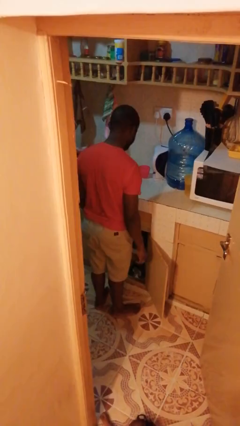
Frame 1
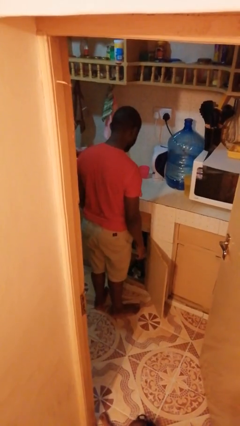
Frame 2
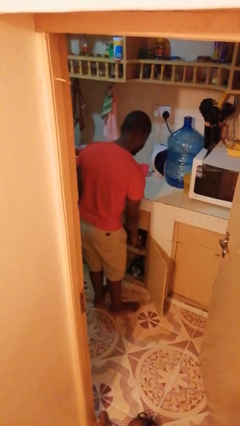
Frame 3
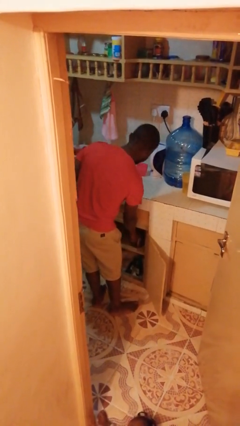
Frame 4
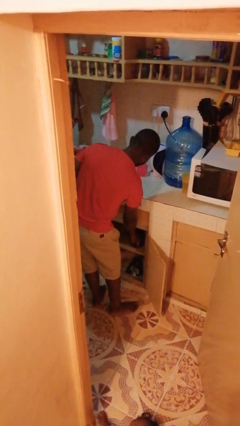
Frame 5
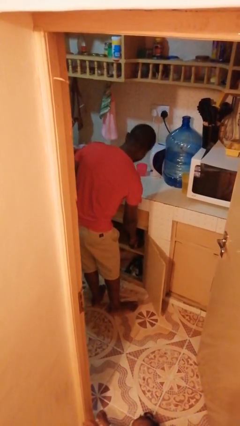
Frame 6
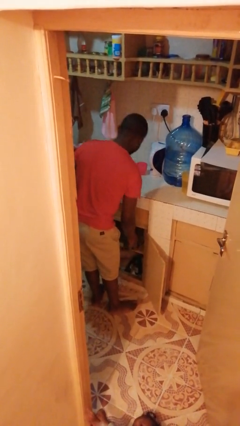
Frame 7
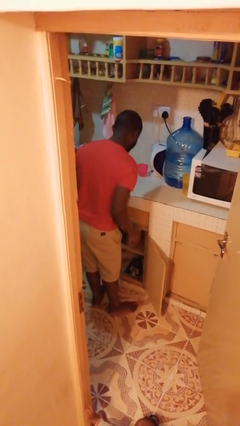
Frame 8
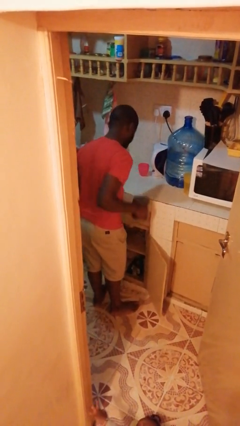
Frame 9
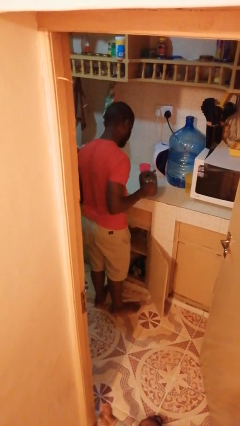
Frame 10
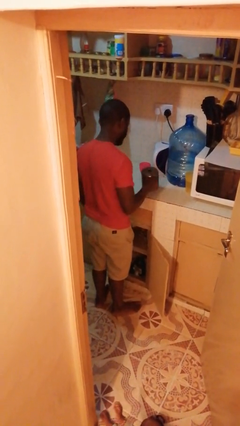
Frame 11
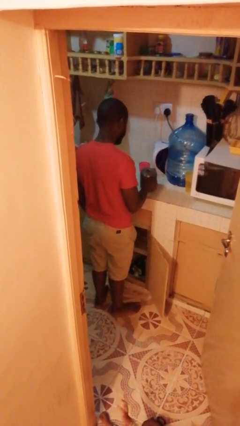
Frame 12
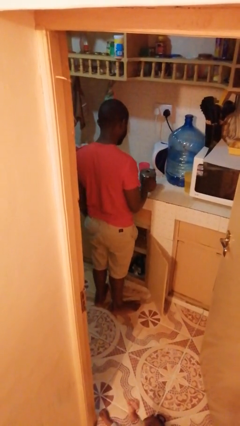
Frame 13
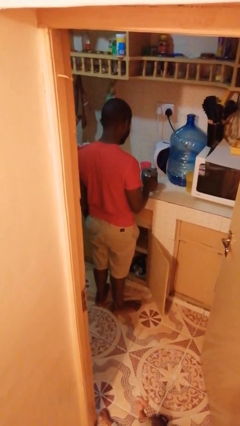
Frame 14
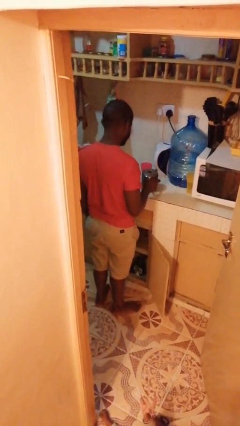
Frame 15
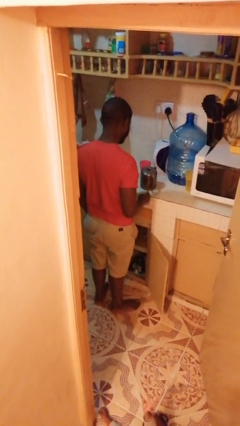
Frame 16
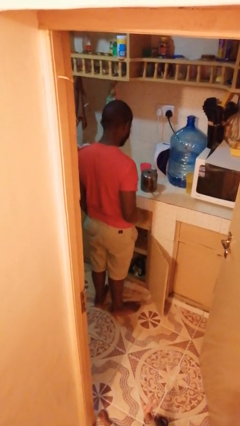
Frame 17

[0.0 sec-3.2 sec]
person takes object from cabinet

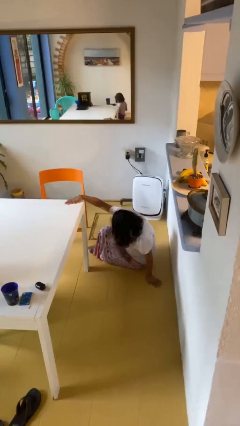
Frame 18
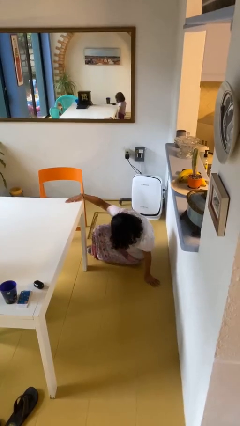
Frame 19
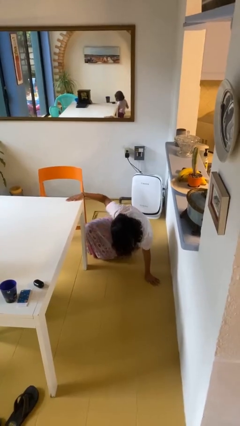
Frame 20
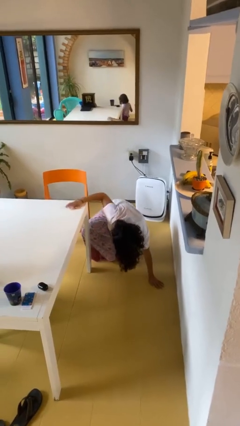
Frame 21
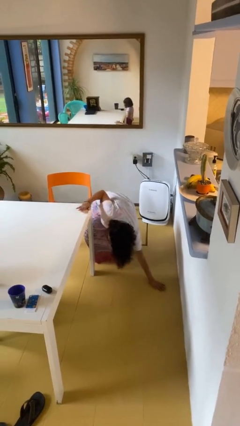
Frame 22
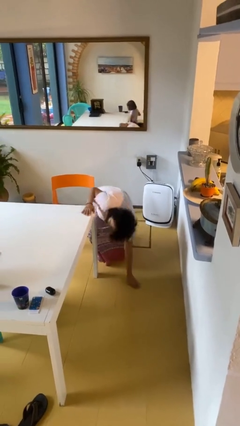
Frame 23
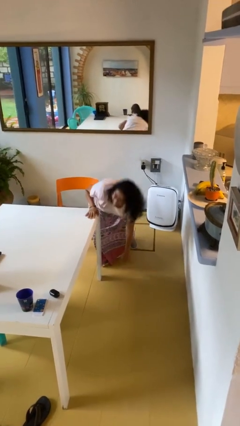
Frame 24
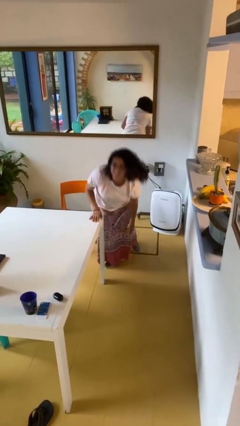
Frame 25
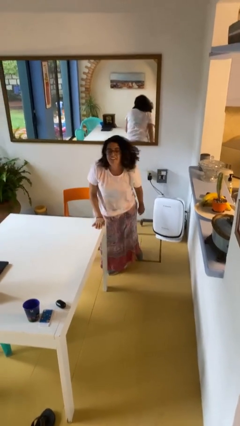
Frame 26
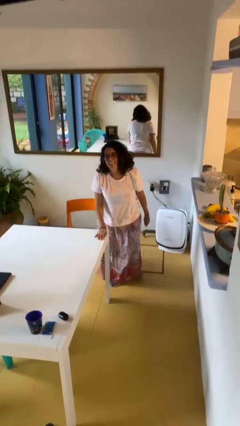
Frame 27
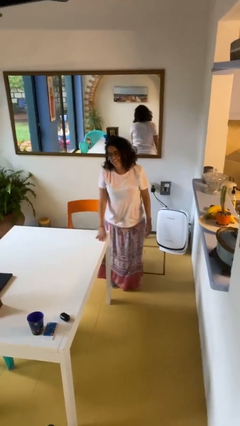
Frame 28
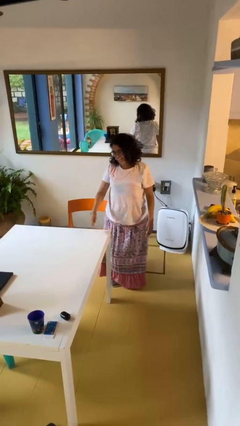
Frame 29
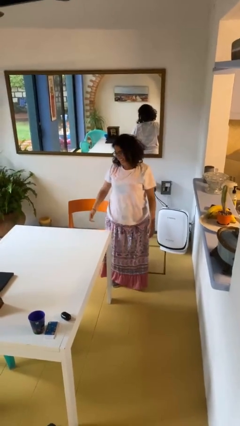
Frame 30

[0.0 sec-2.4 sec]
person stands up from floor

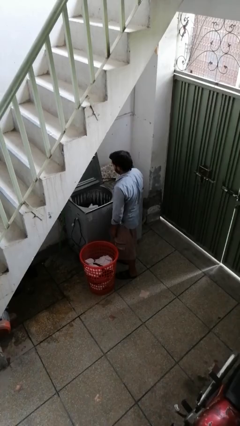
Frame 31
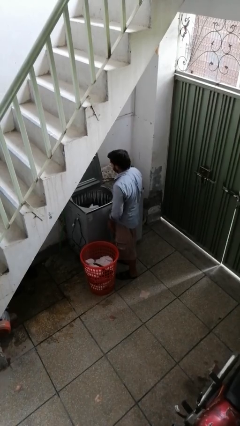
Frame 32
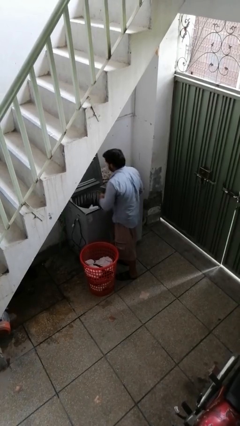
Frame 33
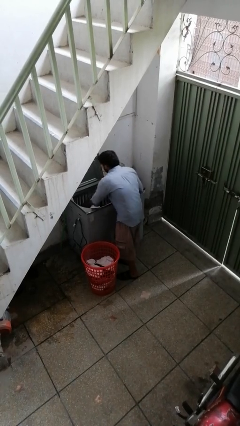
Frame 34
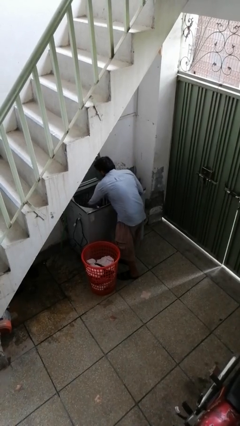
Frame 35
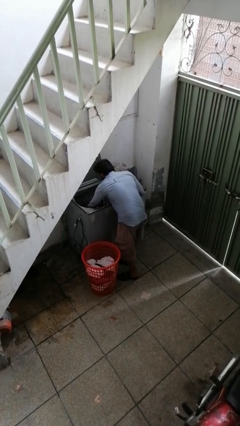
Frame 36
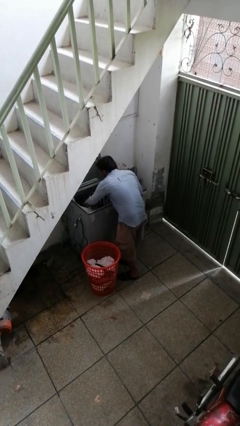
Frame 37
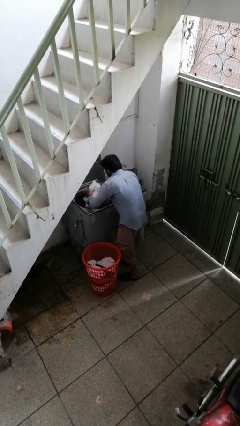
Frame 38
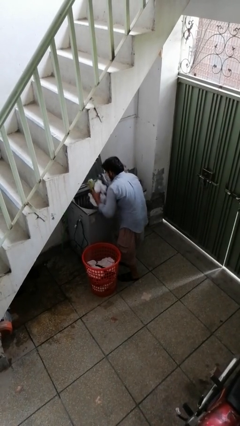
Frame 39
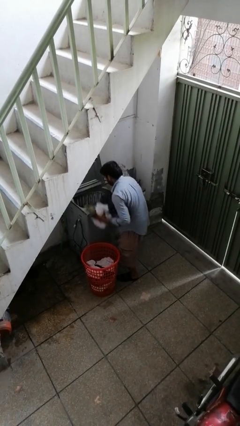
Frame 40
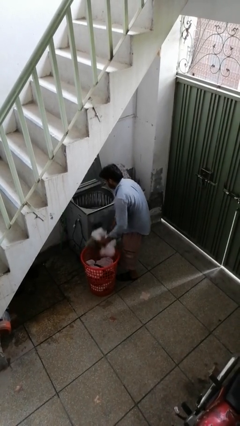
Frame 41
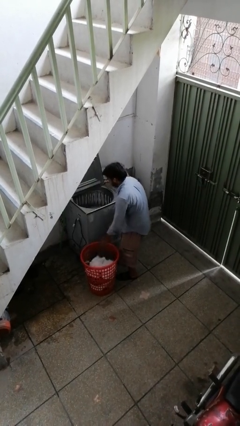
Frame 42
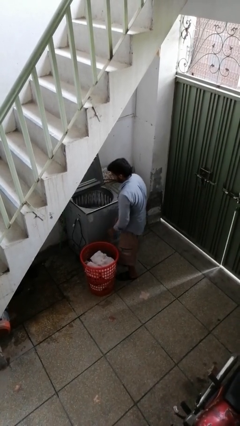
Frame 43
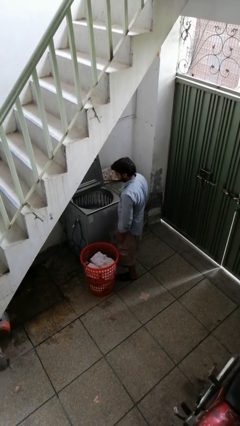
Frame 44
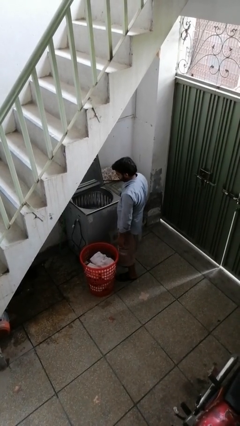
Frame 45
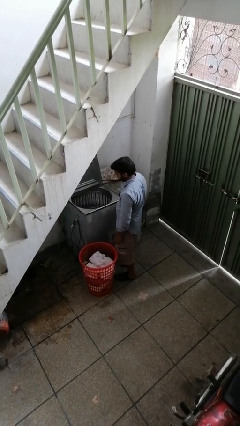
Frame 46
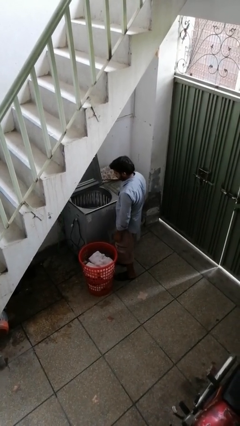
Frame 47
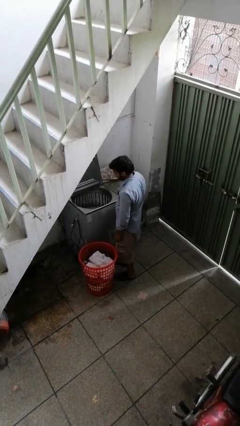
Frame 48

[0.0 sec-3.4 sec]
person unloads clotheswasher

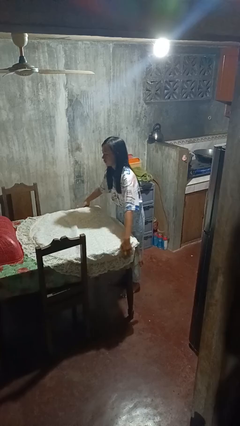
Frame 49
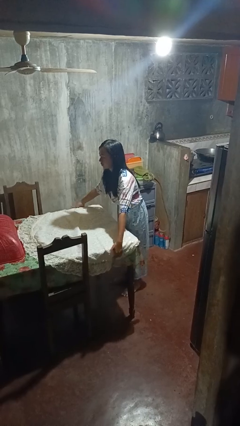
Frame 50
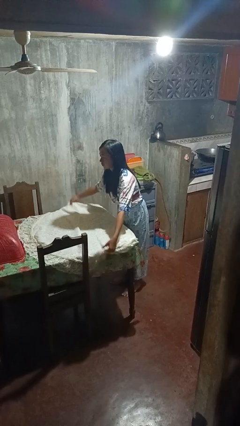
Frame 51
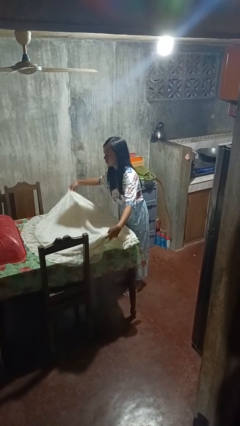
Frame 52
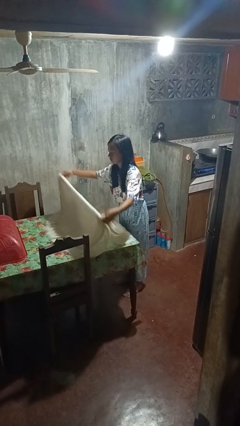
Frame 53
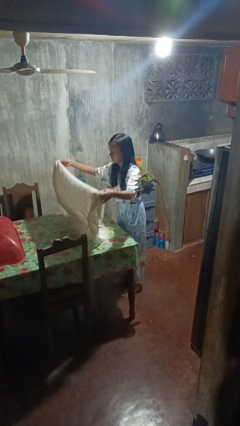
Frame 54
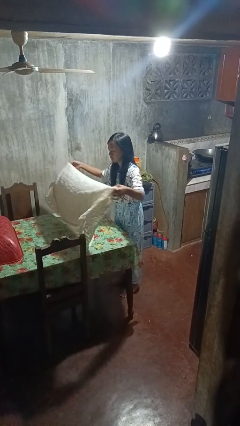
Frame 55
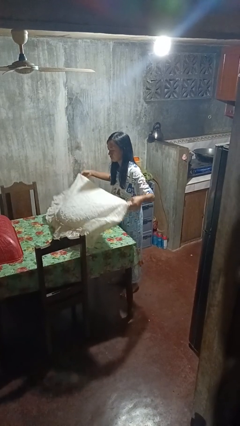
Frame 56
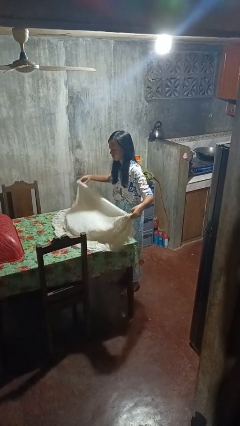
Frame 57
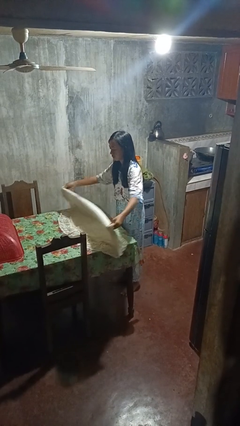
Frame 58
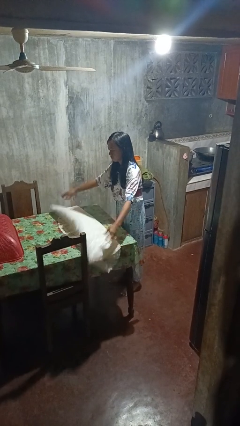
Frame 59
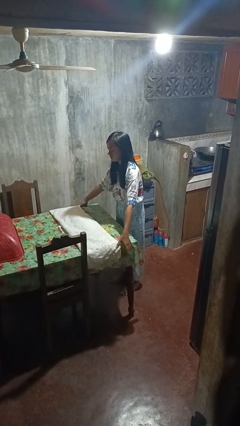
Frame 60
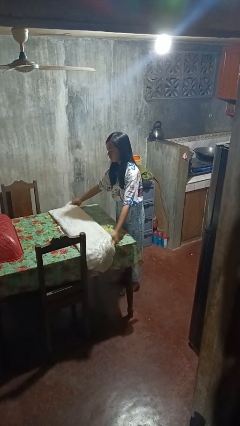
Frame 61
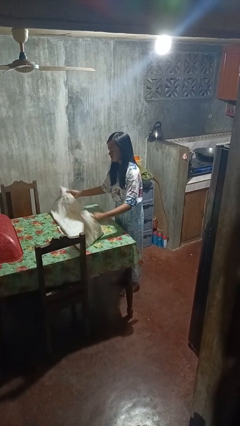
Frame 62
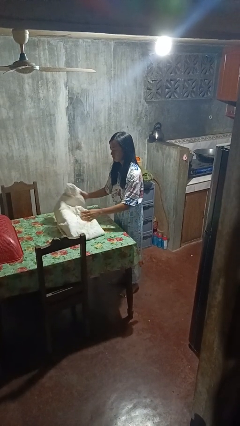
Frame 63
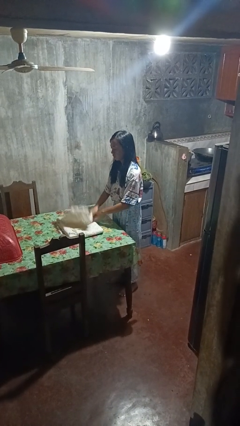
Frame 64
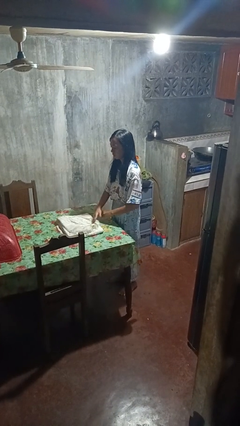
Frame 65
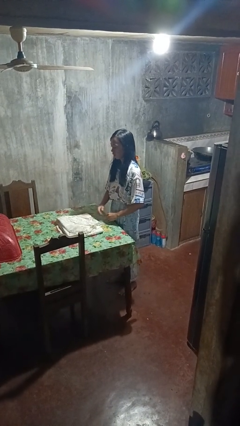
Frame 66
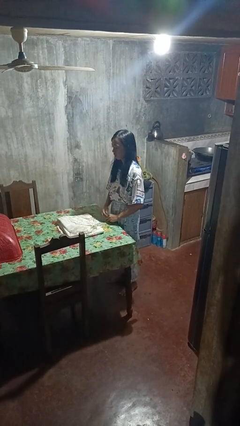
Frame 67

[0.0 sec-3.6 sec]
person folds tablecloth

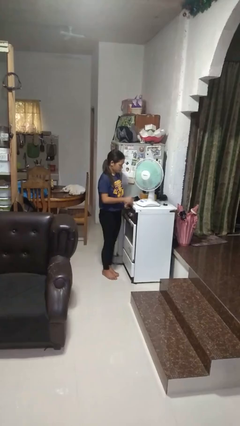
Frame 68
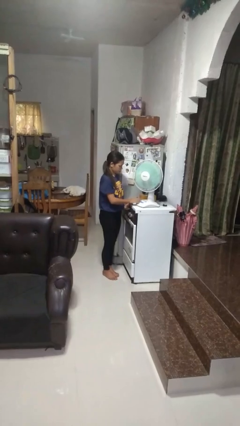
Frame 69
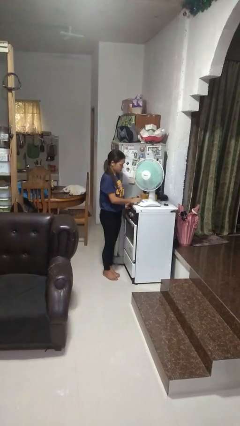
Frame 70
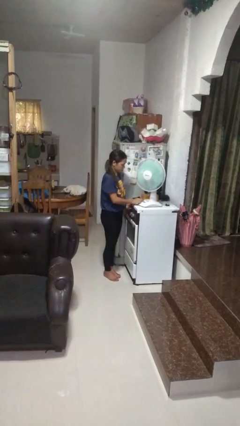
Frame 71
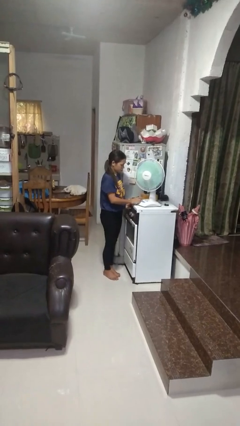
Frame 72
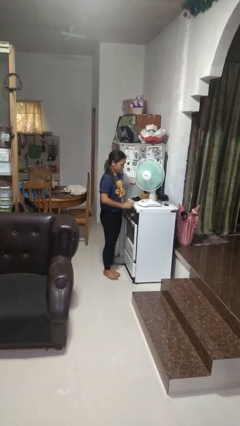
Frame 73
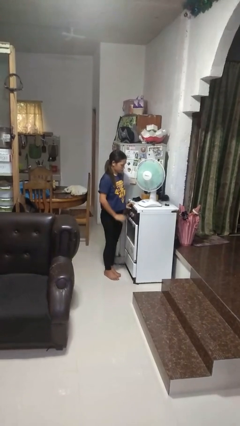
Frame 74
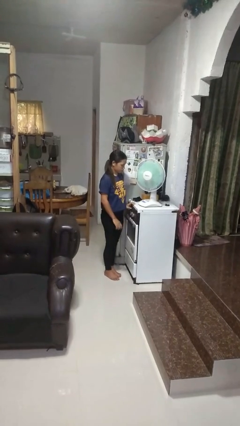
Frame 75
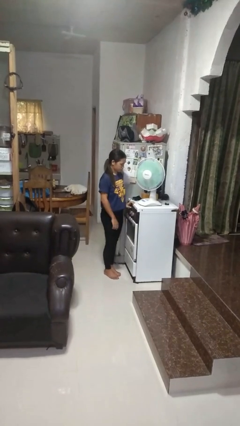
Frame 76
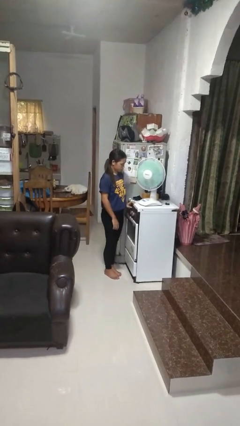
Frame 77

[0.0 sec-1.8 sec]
person turns off fan

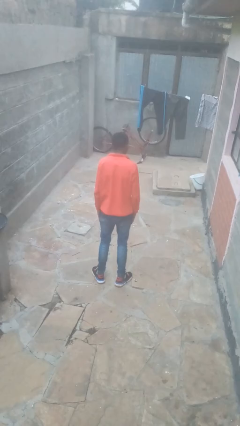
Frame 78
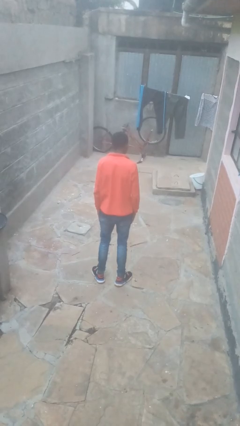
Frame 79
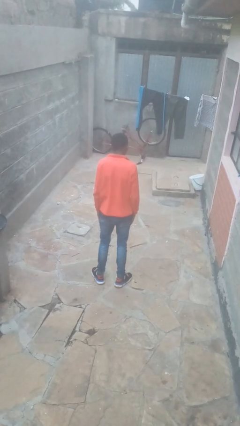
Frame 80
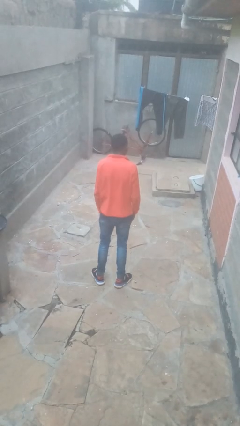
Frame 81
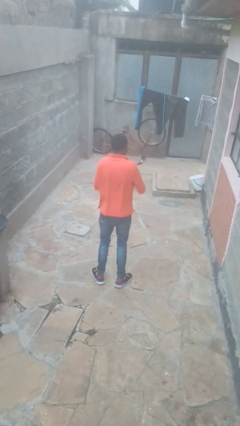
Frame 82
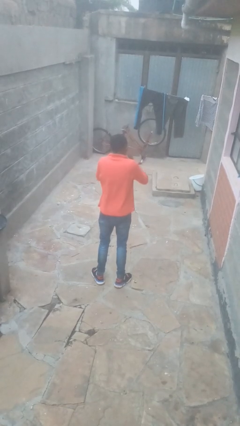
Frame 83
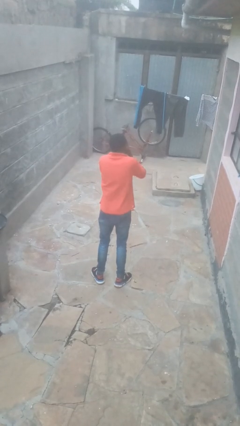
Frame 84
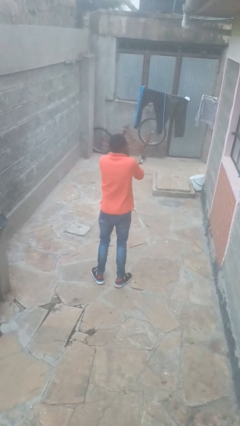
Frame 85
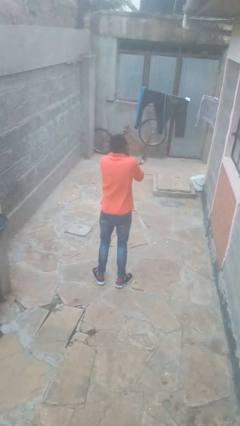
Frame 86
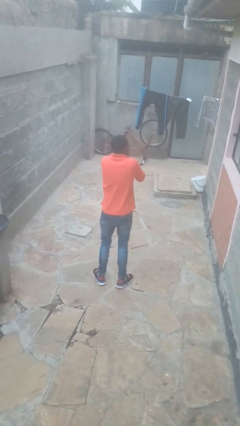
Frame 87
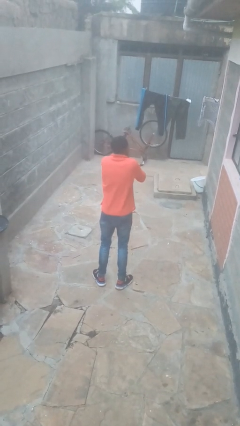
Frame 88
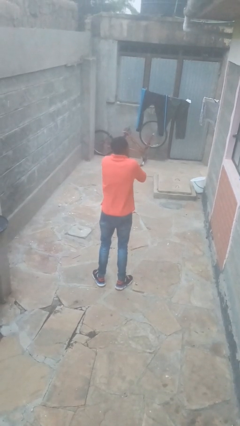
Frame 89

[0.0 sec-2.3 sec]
person covers face with hands

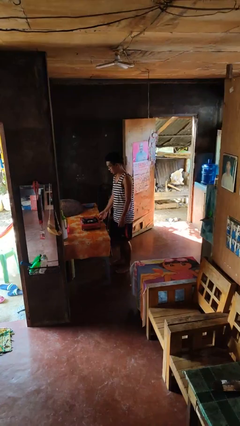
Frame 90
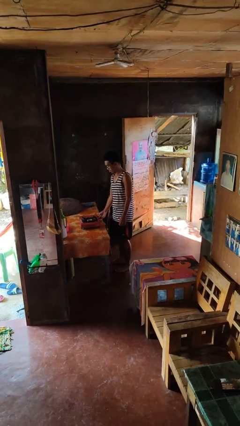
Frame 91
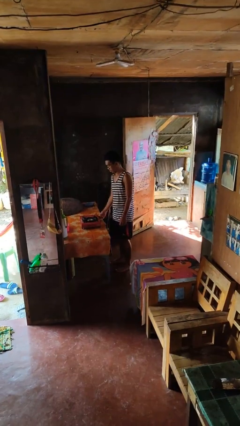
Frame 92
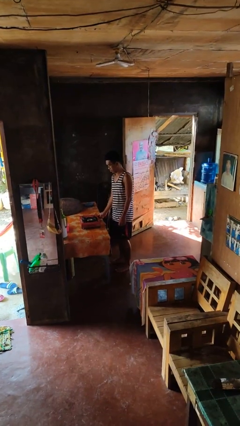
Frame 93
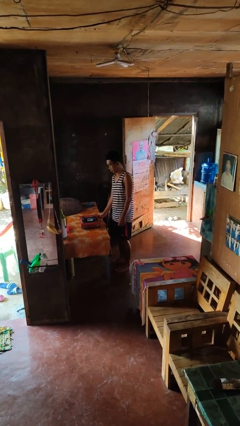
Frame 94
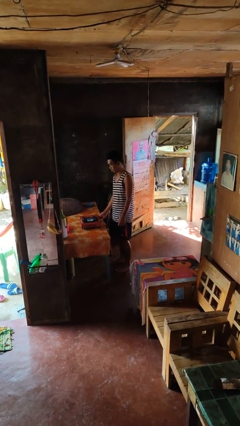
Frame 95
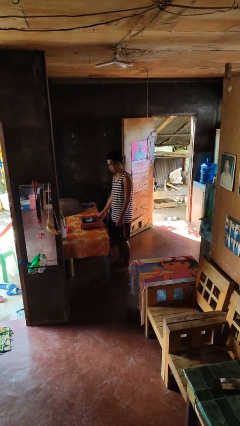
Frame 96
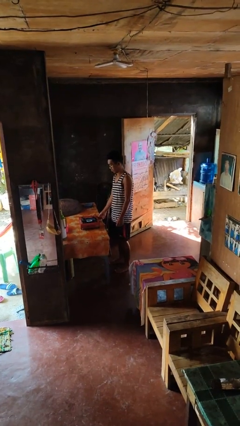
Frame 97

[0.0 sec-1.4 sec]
person turns on stovetop
